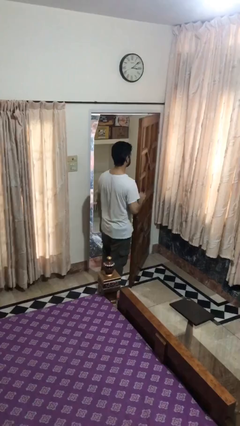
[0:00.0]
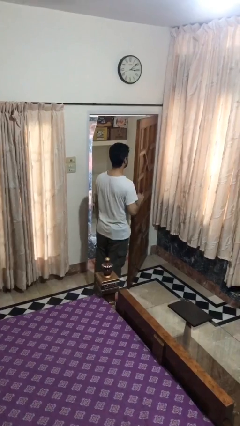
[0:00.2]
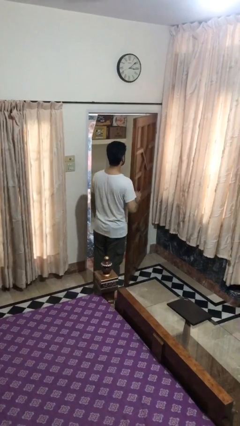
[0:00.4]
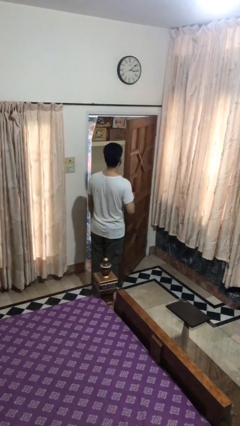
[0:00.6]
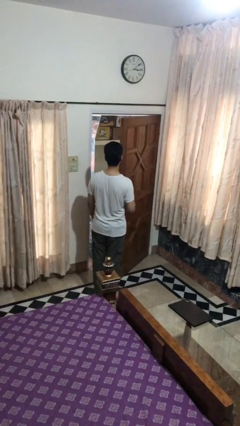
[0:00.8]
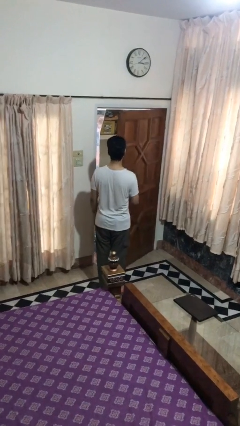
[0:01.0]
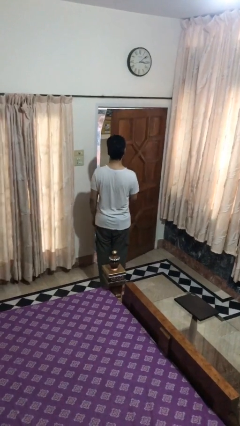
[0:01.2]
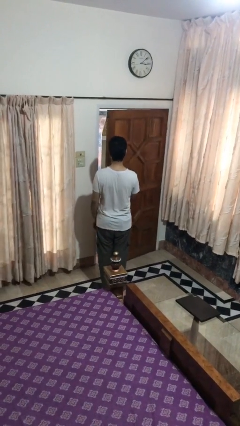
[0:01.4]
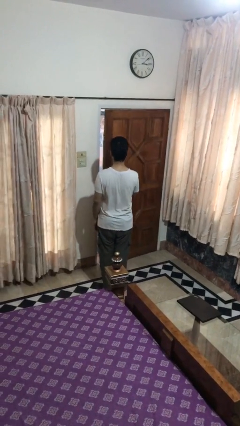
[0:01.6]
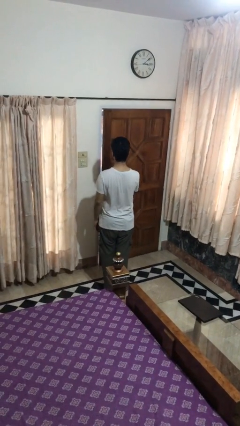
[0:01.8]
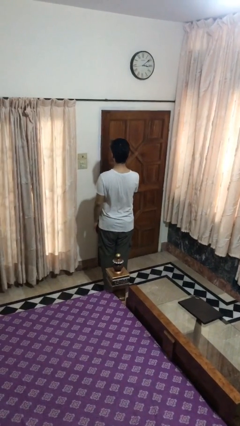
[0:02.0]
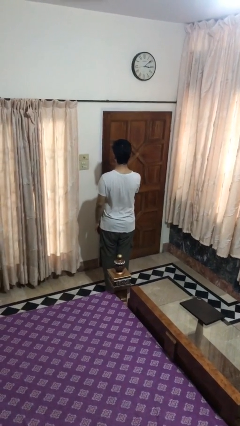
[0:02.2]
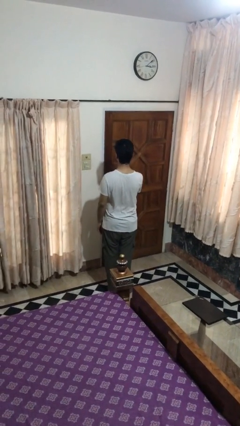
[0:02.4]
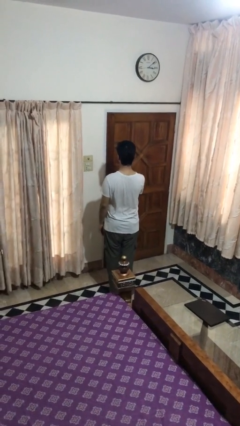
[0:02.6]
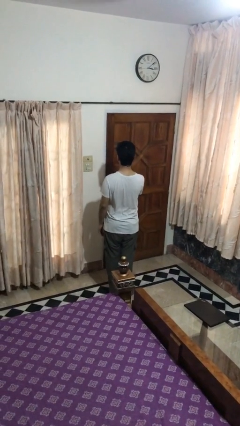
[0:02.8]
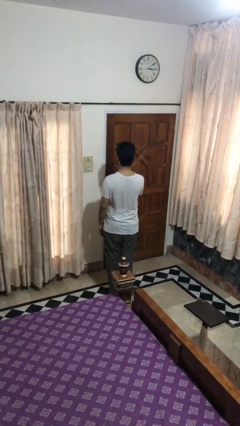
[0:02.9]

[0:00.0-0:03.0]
person closes facility door

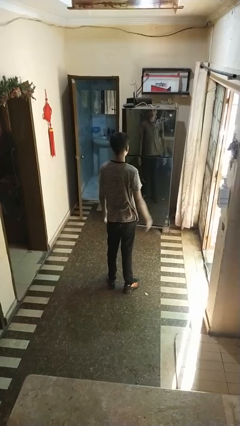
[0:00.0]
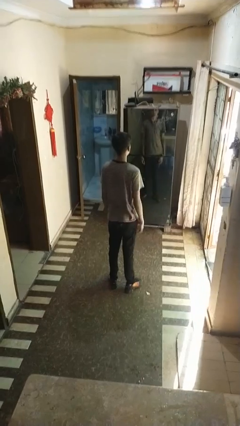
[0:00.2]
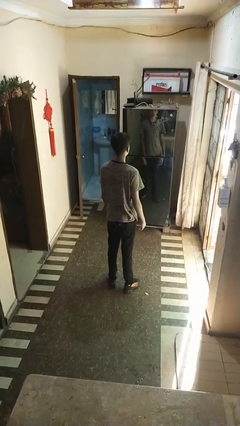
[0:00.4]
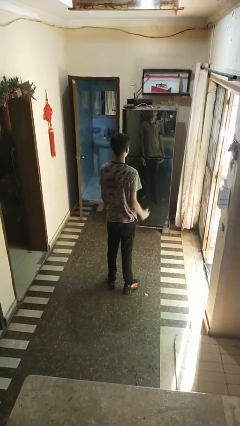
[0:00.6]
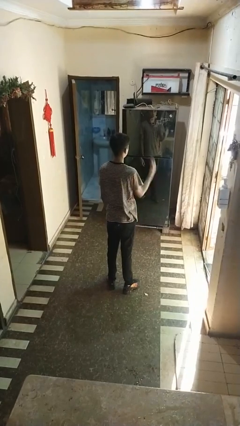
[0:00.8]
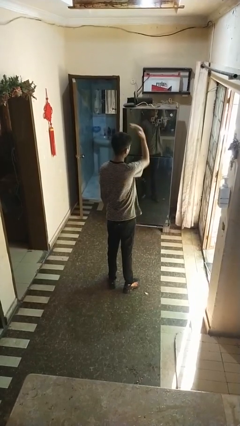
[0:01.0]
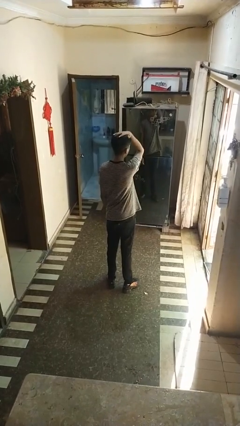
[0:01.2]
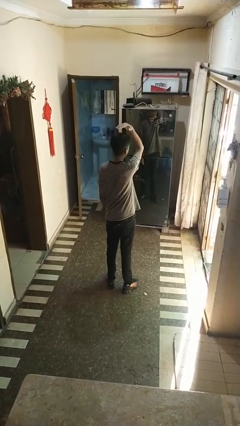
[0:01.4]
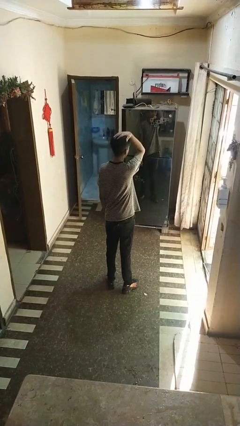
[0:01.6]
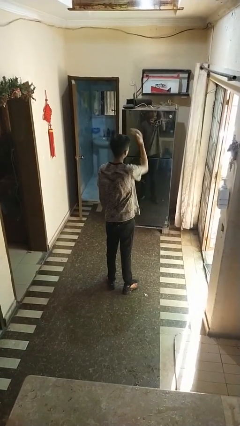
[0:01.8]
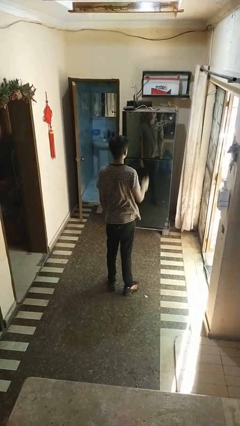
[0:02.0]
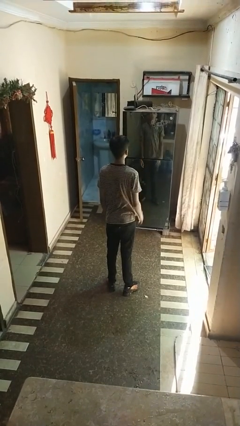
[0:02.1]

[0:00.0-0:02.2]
person pats head

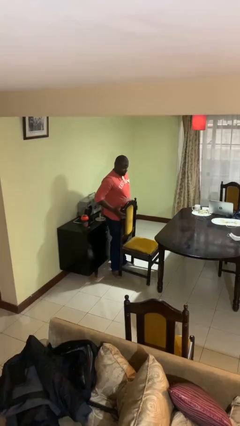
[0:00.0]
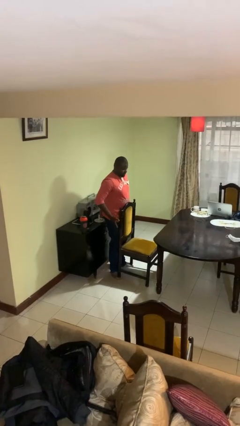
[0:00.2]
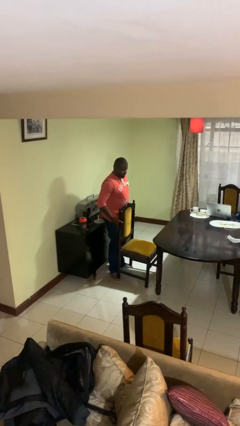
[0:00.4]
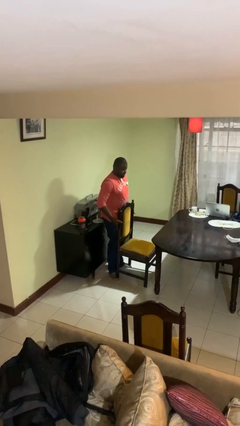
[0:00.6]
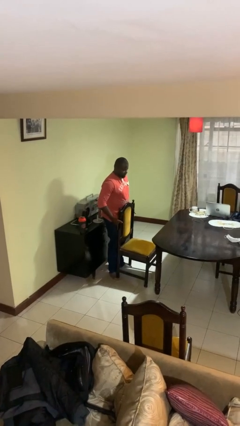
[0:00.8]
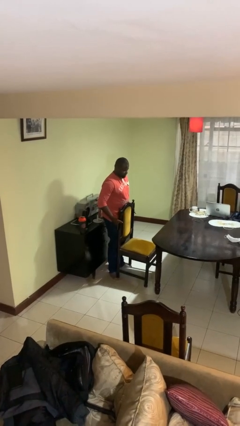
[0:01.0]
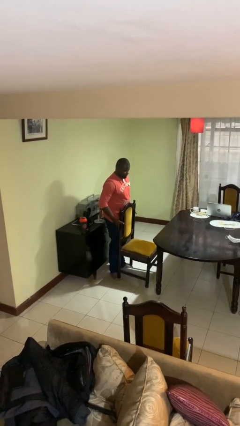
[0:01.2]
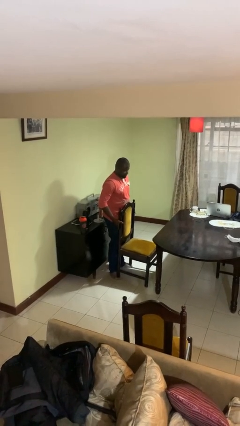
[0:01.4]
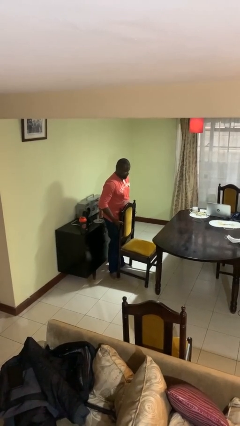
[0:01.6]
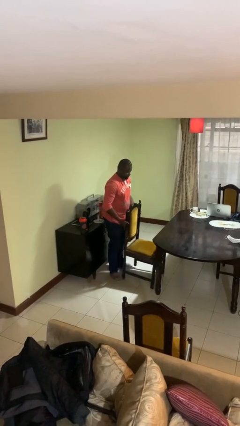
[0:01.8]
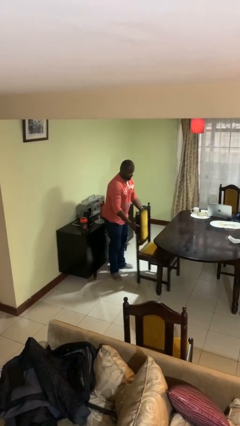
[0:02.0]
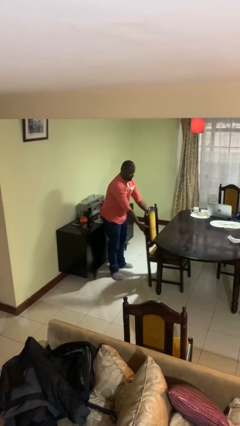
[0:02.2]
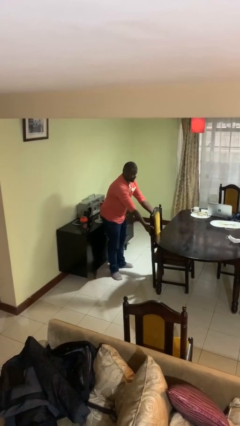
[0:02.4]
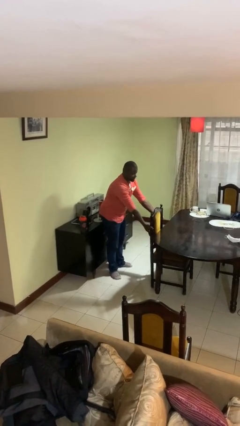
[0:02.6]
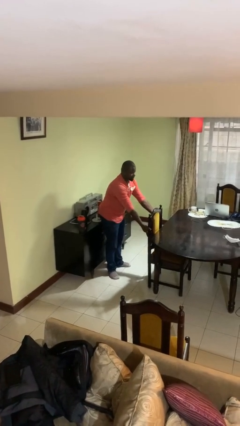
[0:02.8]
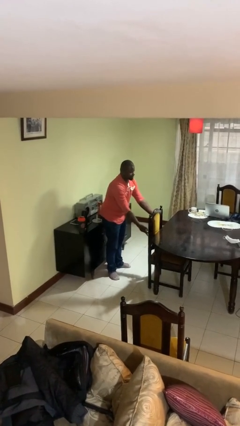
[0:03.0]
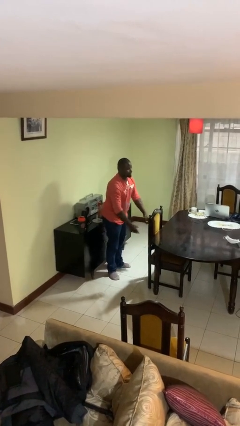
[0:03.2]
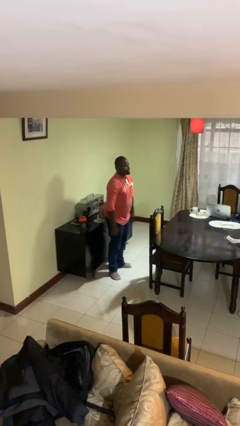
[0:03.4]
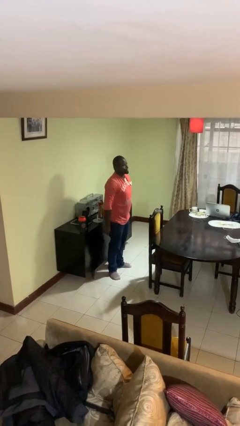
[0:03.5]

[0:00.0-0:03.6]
person pushes in chair

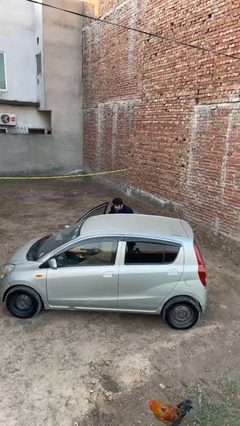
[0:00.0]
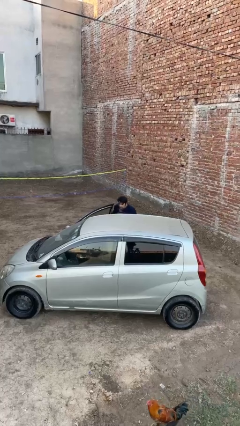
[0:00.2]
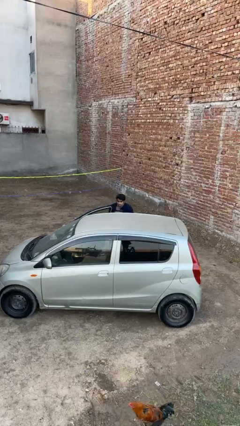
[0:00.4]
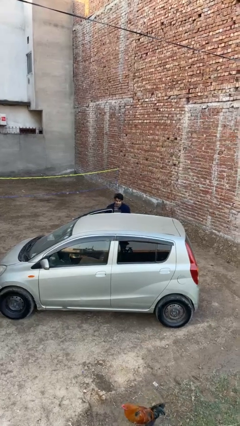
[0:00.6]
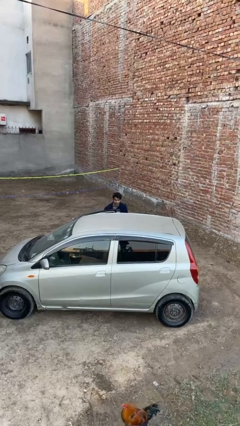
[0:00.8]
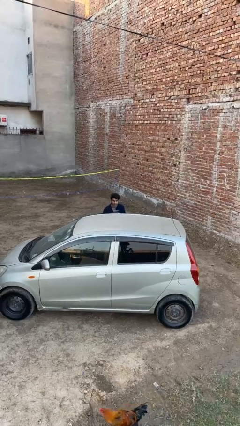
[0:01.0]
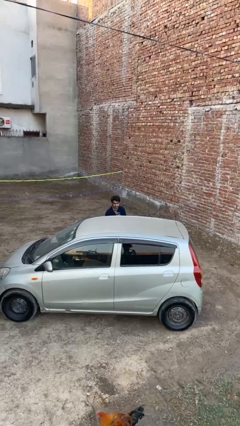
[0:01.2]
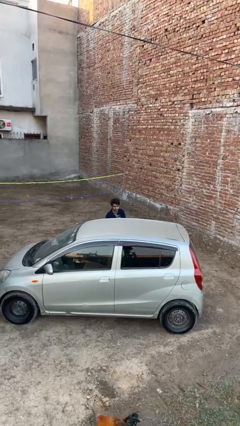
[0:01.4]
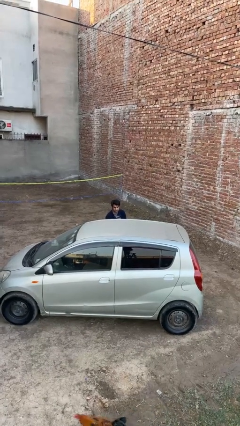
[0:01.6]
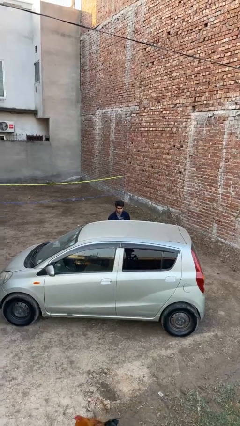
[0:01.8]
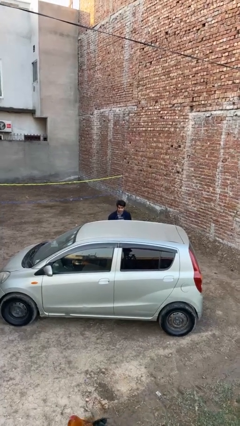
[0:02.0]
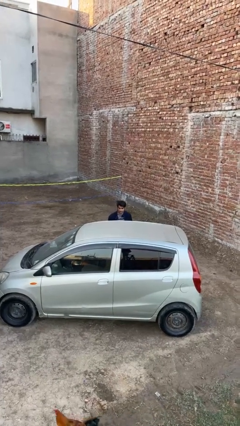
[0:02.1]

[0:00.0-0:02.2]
person closes car door

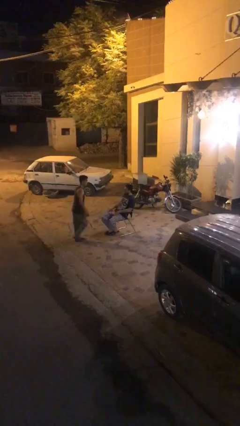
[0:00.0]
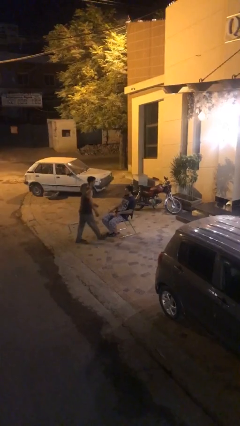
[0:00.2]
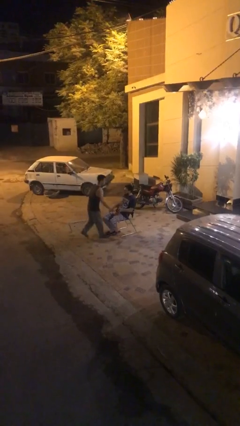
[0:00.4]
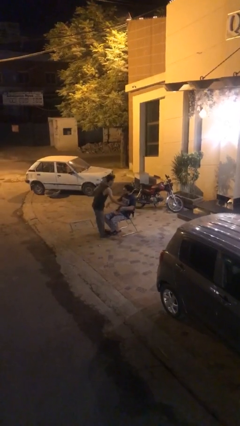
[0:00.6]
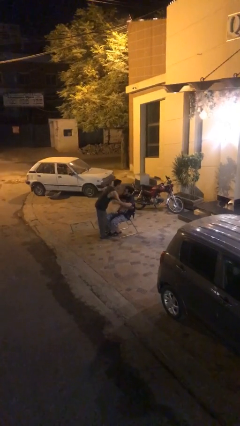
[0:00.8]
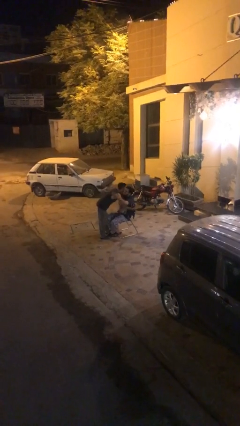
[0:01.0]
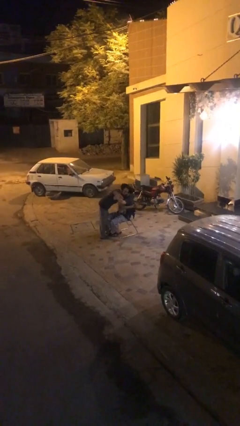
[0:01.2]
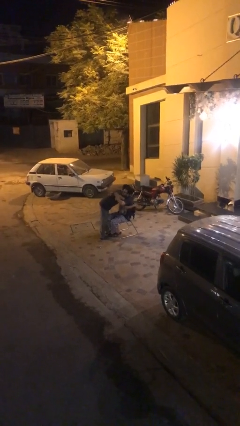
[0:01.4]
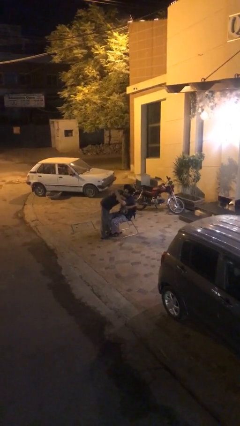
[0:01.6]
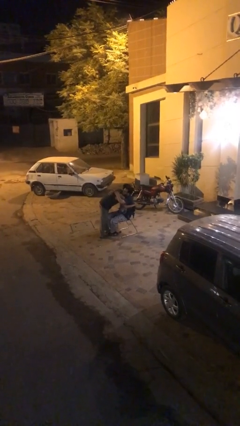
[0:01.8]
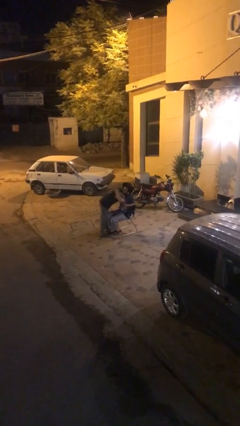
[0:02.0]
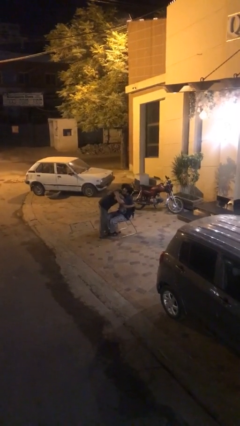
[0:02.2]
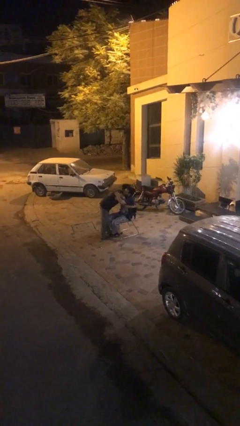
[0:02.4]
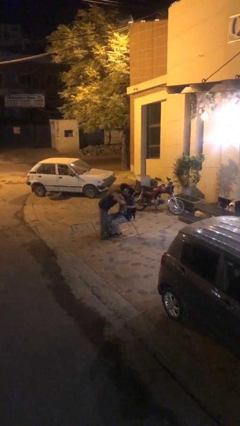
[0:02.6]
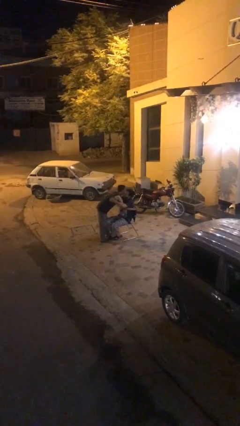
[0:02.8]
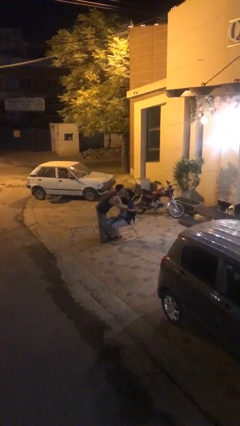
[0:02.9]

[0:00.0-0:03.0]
person embraces person

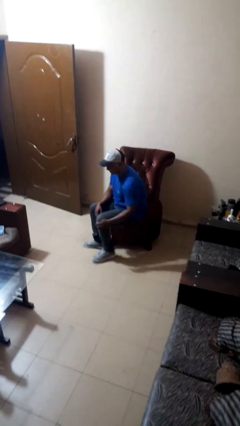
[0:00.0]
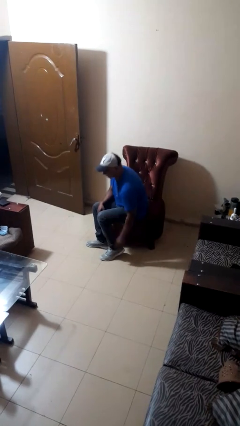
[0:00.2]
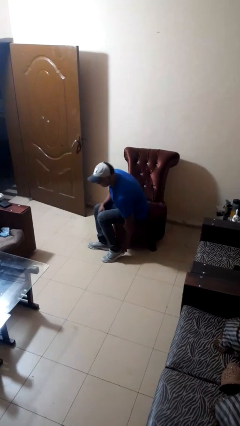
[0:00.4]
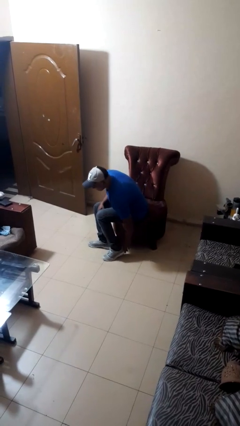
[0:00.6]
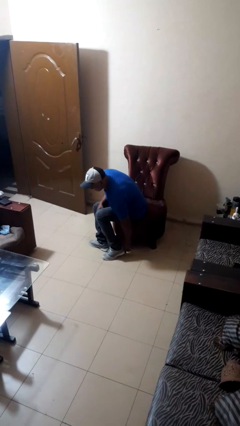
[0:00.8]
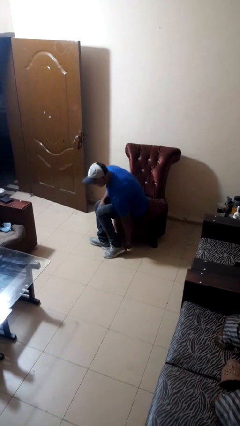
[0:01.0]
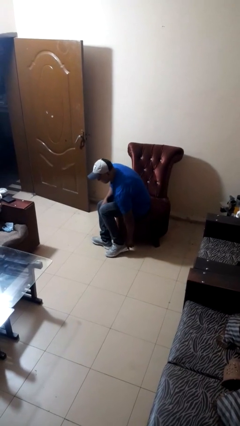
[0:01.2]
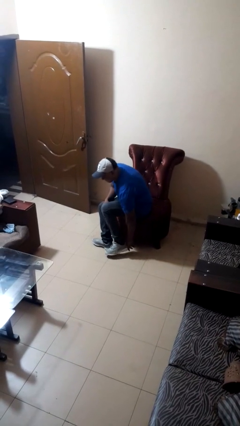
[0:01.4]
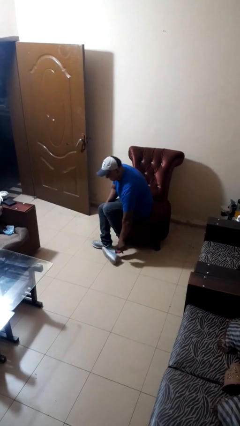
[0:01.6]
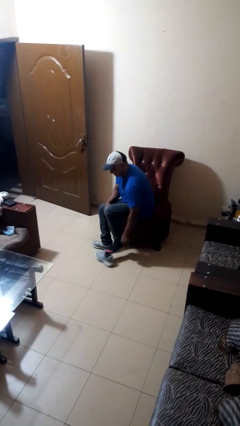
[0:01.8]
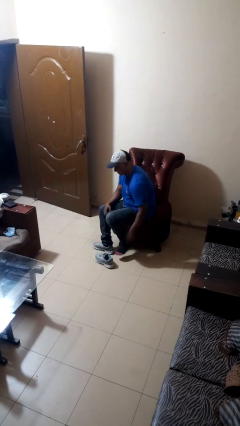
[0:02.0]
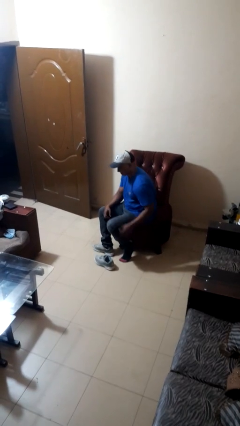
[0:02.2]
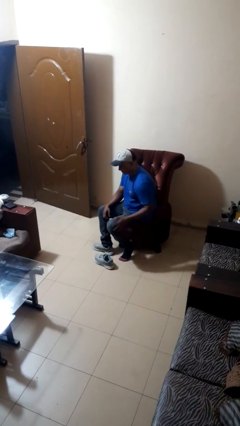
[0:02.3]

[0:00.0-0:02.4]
person takes off boots

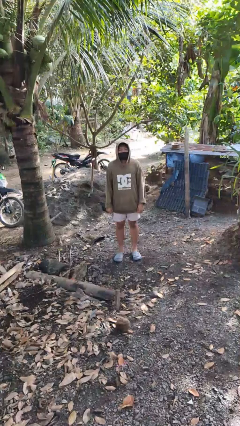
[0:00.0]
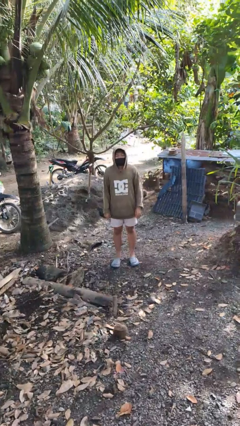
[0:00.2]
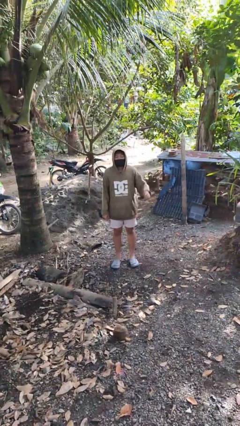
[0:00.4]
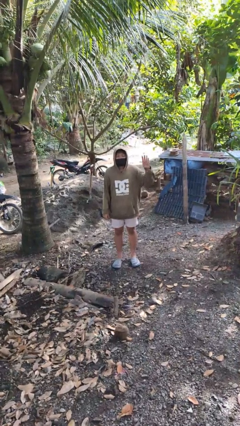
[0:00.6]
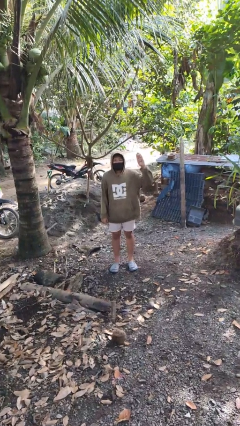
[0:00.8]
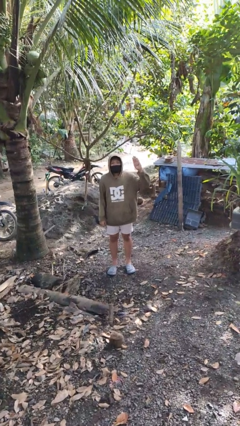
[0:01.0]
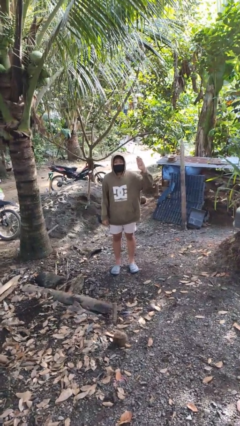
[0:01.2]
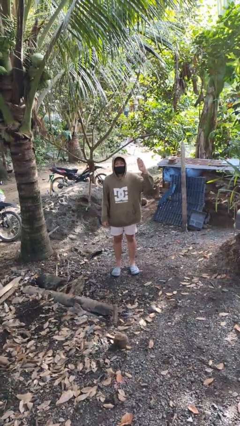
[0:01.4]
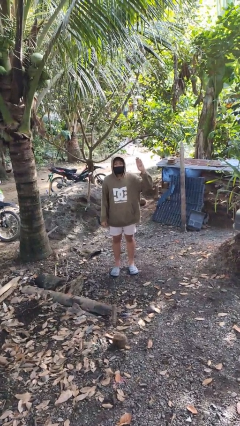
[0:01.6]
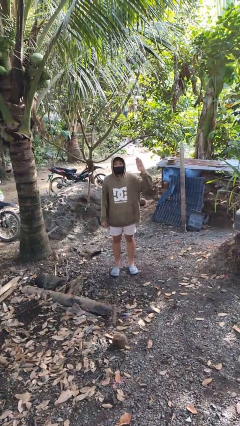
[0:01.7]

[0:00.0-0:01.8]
person gestures number four
